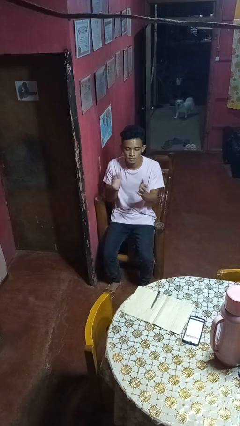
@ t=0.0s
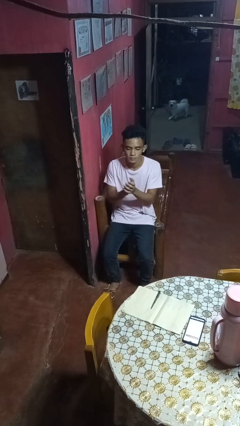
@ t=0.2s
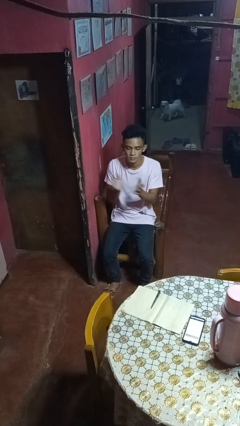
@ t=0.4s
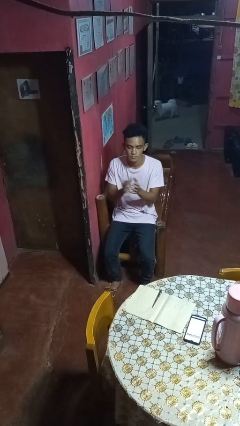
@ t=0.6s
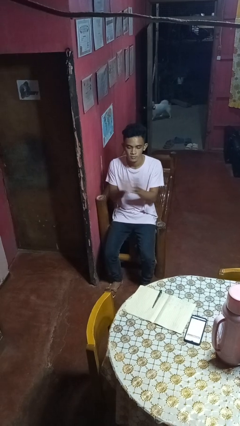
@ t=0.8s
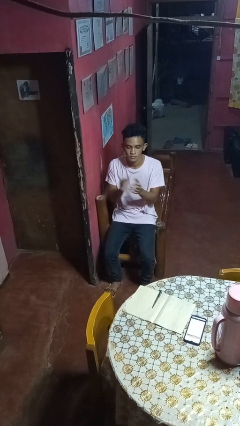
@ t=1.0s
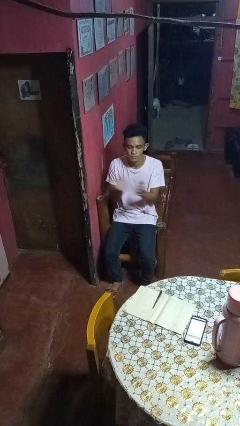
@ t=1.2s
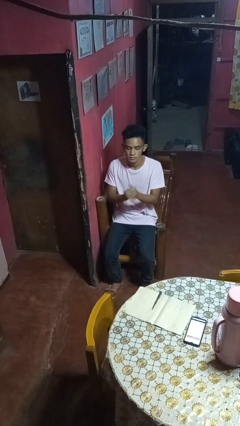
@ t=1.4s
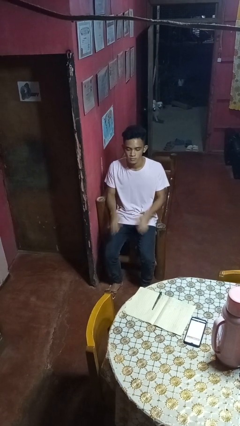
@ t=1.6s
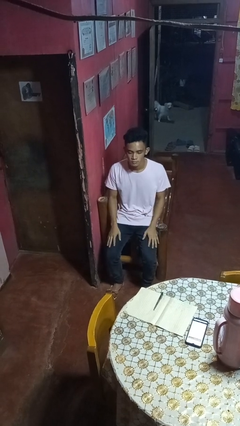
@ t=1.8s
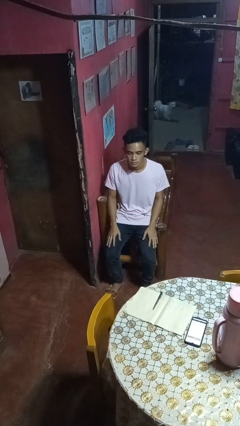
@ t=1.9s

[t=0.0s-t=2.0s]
person claps hands

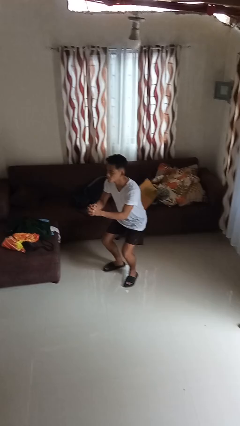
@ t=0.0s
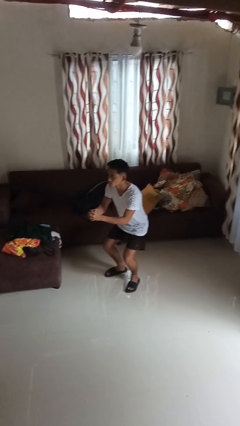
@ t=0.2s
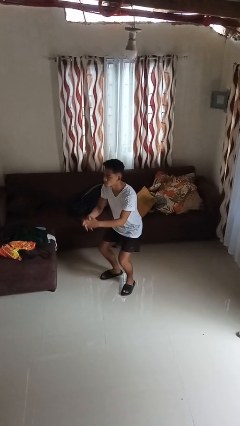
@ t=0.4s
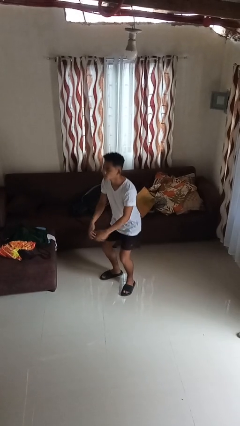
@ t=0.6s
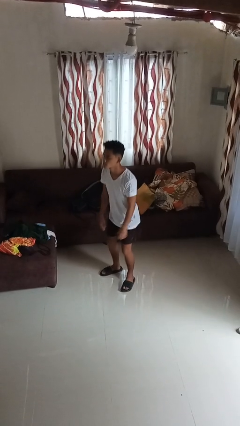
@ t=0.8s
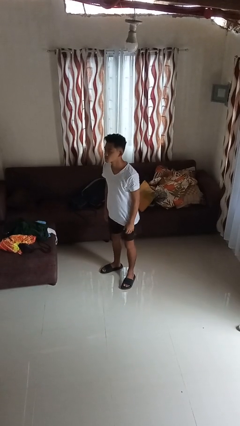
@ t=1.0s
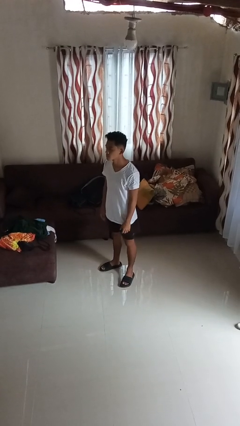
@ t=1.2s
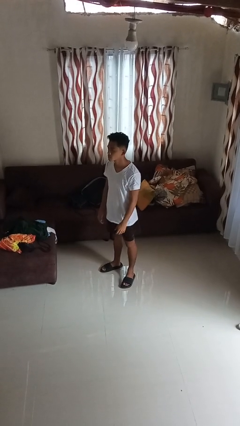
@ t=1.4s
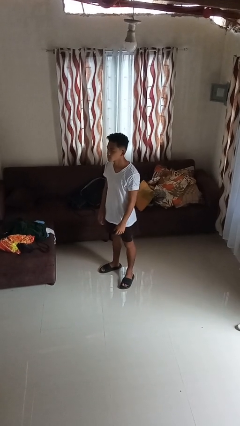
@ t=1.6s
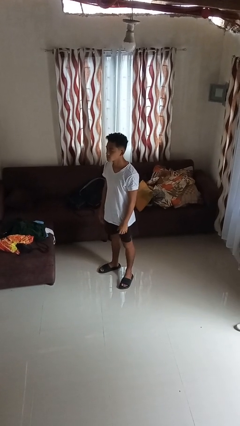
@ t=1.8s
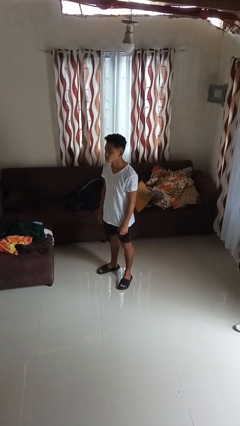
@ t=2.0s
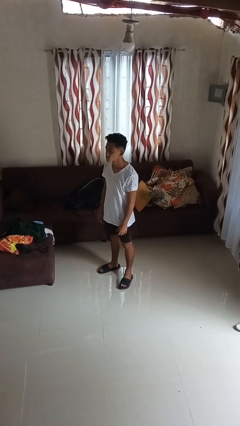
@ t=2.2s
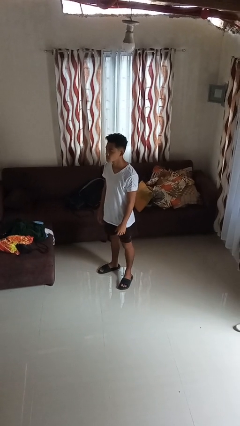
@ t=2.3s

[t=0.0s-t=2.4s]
person stands up

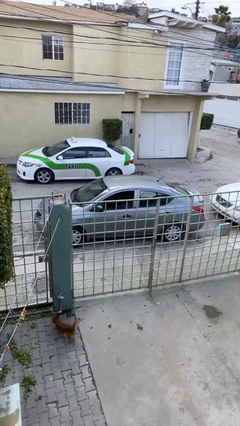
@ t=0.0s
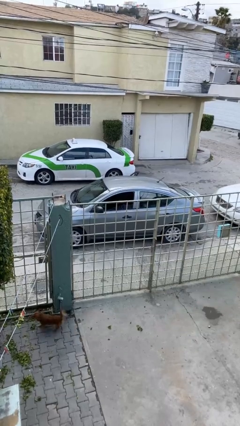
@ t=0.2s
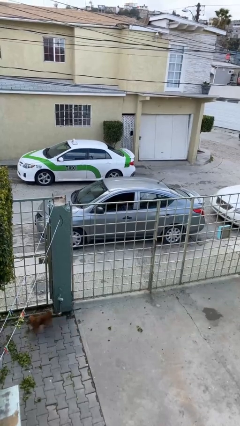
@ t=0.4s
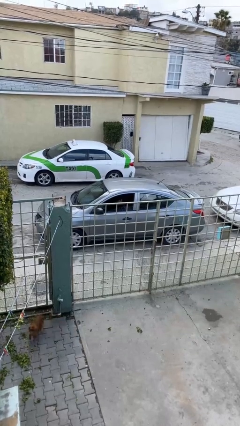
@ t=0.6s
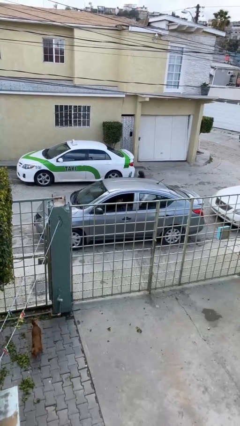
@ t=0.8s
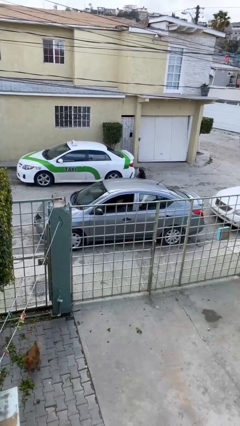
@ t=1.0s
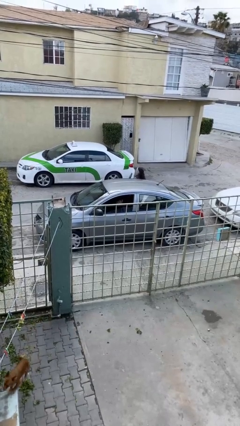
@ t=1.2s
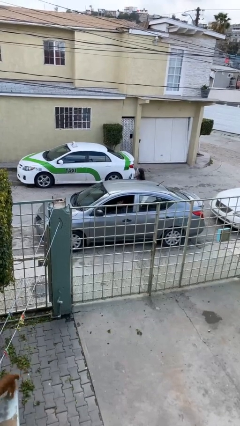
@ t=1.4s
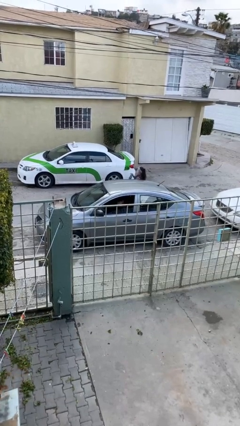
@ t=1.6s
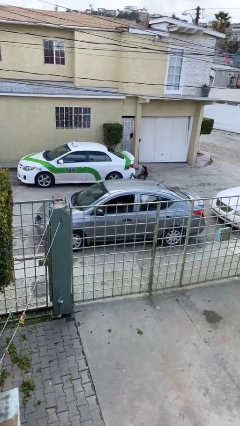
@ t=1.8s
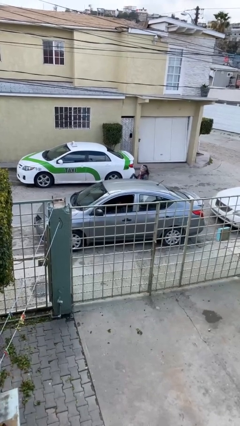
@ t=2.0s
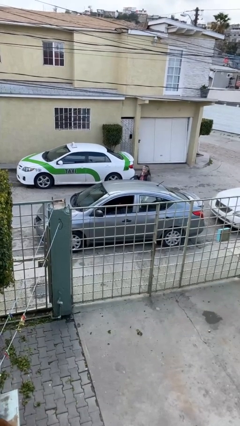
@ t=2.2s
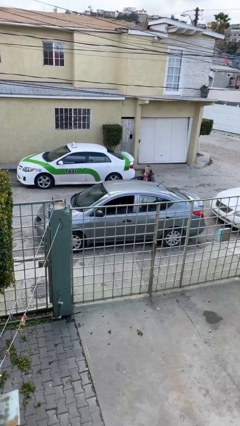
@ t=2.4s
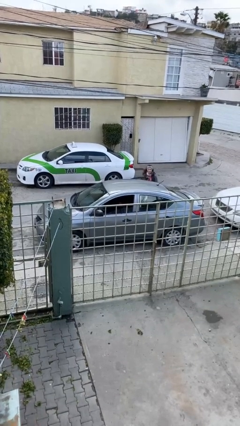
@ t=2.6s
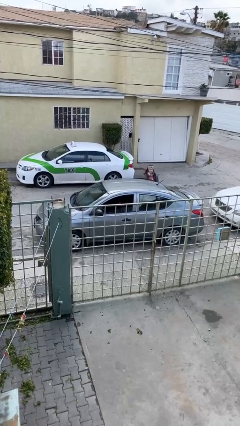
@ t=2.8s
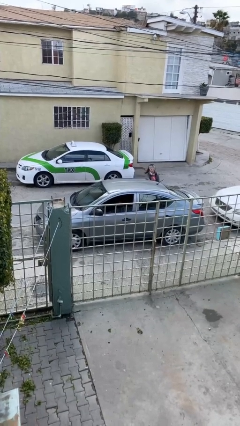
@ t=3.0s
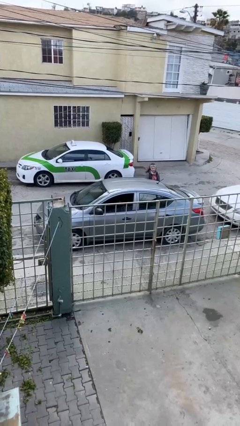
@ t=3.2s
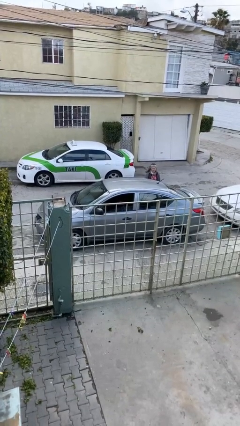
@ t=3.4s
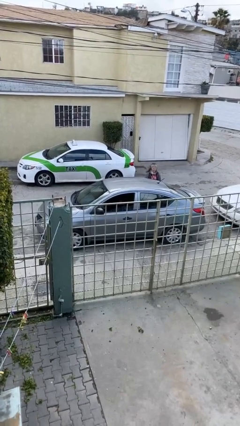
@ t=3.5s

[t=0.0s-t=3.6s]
car drops off person

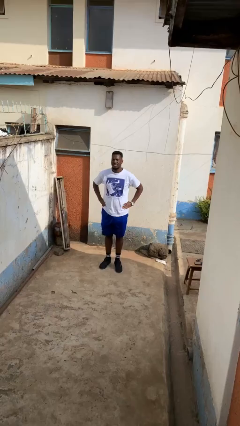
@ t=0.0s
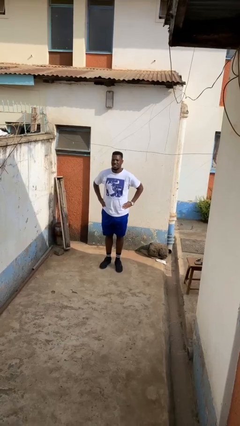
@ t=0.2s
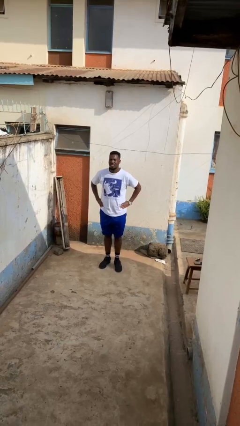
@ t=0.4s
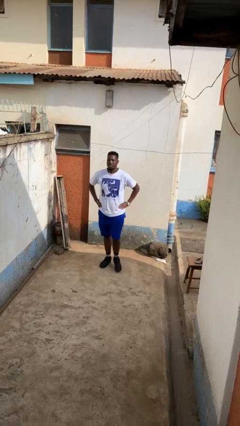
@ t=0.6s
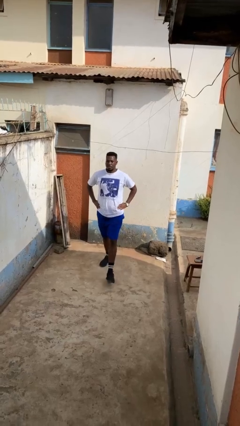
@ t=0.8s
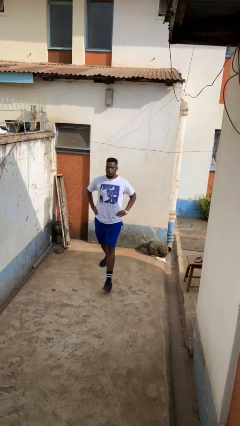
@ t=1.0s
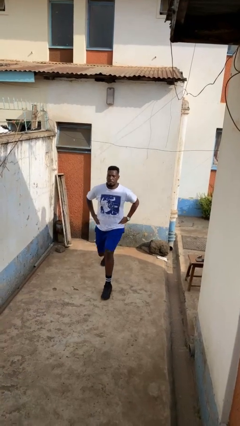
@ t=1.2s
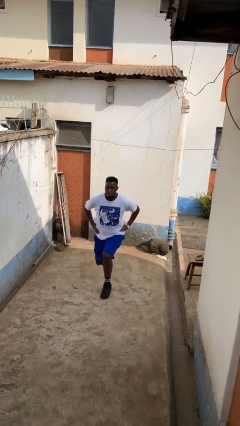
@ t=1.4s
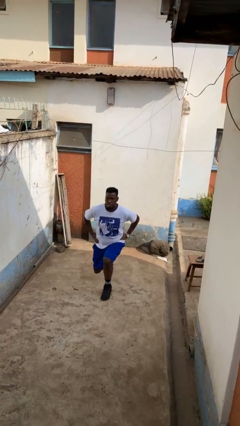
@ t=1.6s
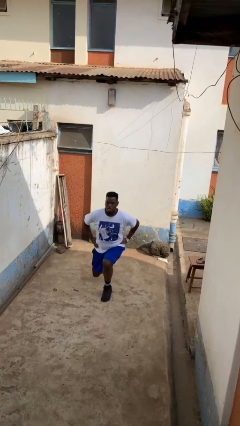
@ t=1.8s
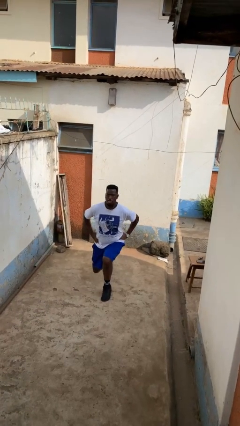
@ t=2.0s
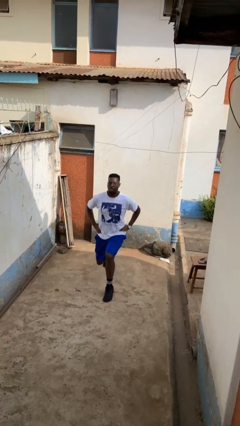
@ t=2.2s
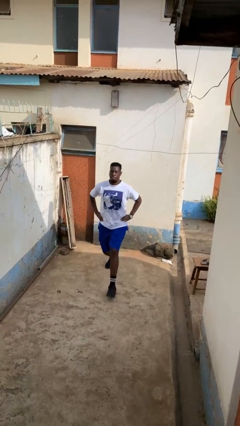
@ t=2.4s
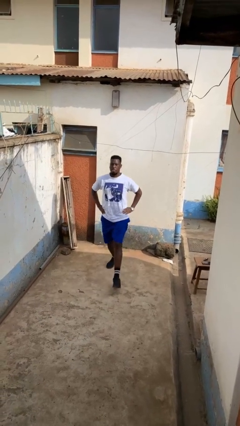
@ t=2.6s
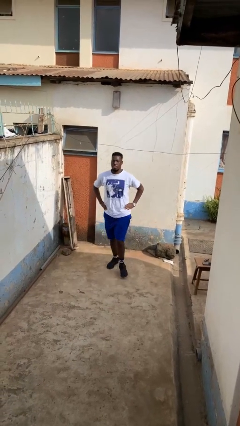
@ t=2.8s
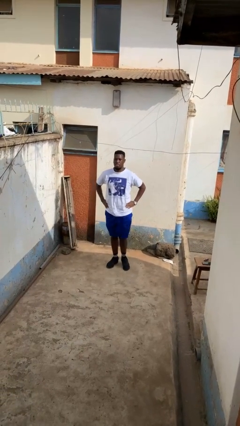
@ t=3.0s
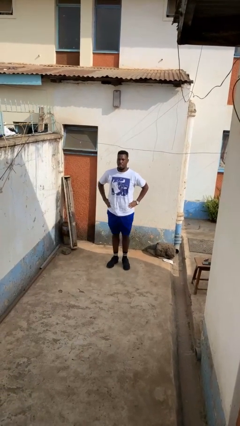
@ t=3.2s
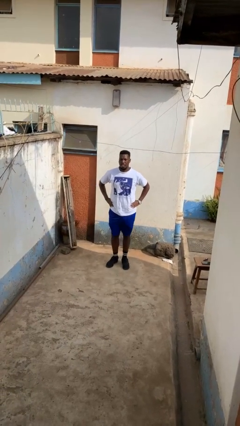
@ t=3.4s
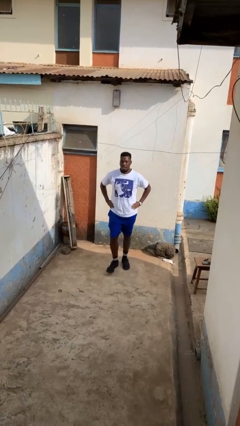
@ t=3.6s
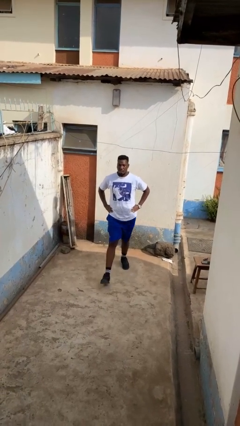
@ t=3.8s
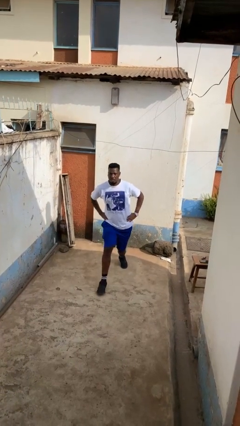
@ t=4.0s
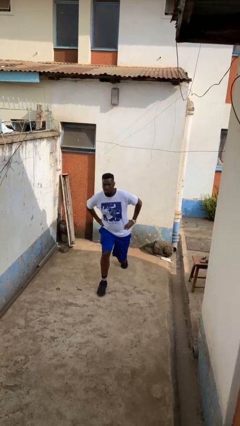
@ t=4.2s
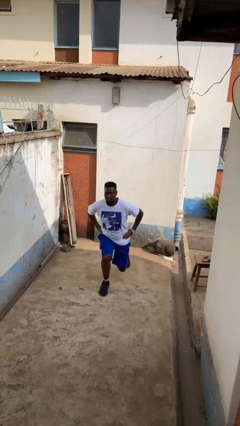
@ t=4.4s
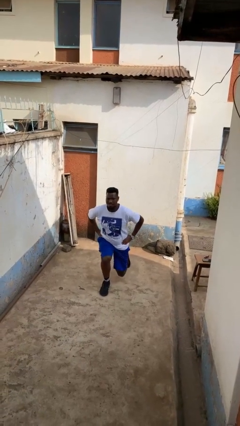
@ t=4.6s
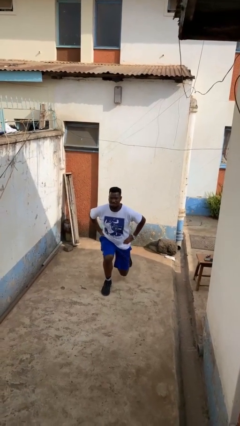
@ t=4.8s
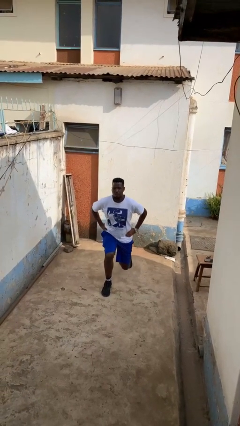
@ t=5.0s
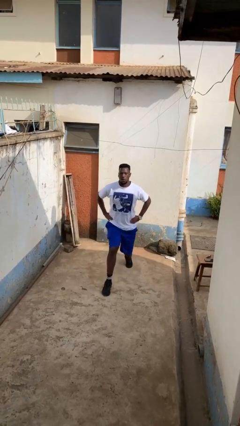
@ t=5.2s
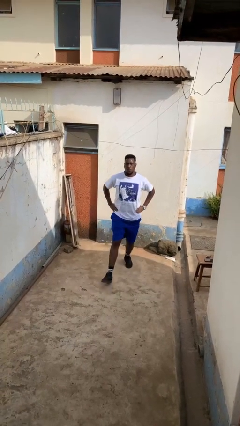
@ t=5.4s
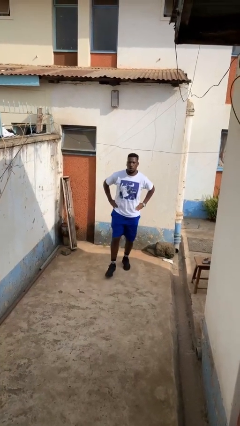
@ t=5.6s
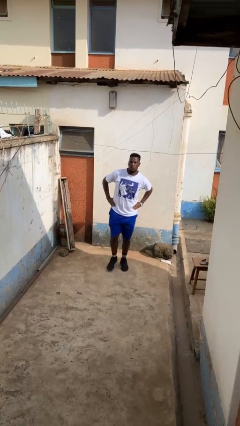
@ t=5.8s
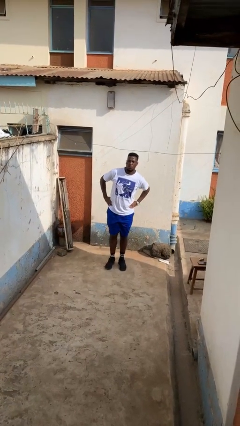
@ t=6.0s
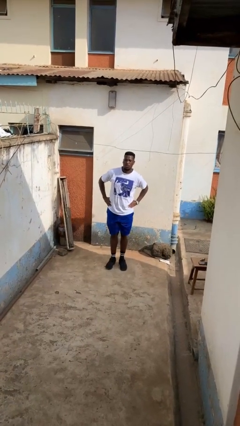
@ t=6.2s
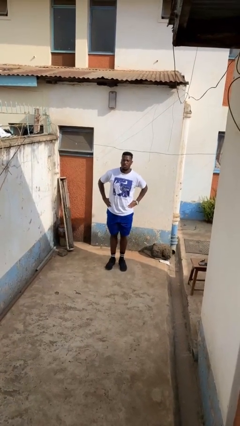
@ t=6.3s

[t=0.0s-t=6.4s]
person exercises with lunges

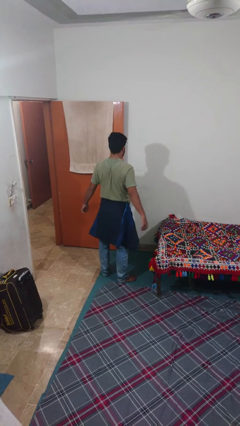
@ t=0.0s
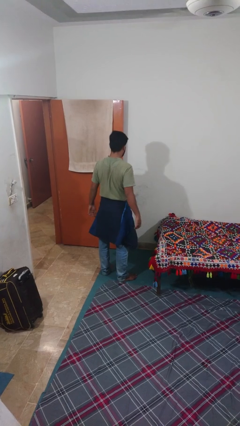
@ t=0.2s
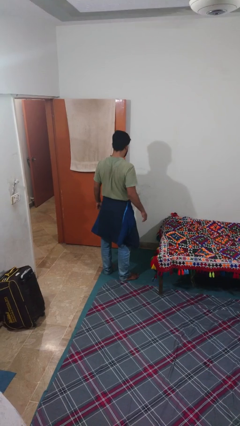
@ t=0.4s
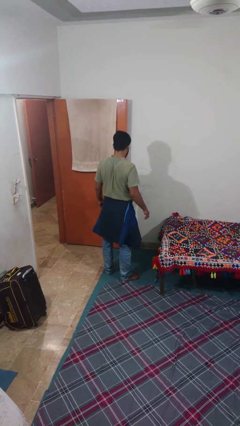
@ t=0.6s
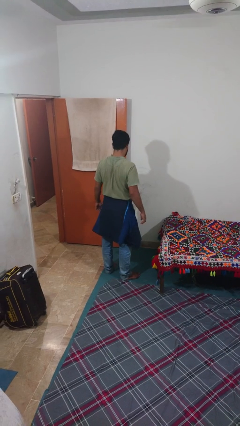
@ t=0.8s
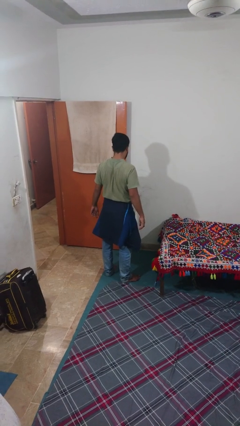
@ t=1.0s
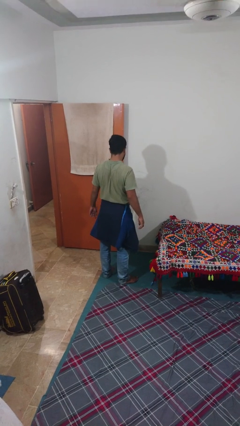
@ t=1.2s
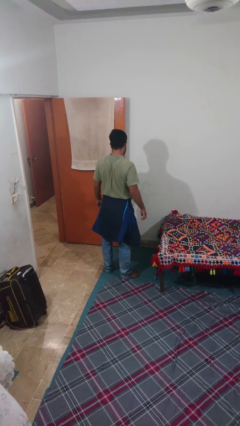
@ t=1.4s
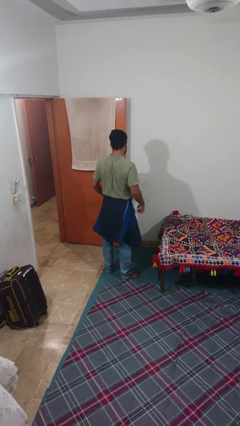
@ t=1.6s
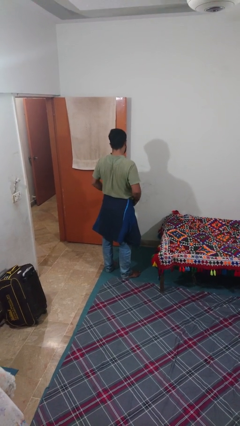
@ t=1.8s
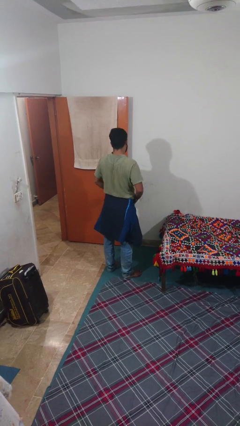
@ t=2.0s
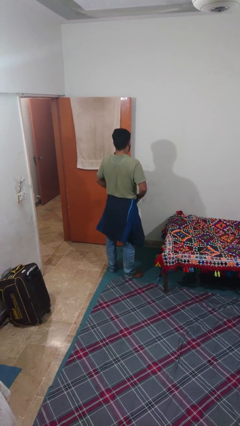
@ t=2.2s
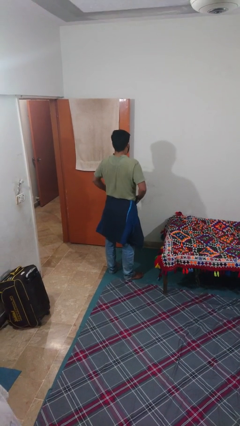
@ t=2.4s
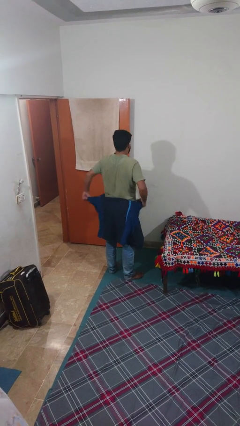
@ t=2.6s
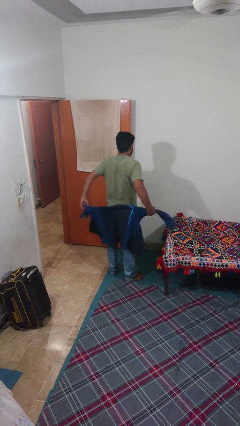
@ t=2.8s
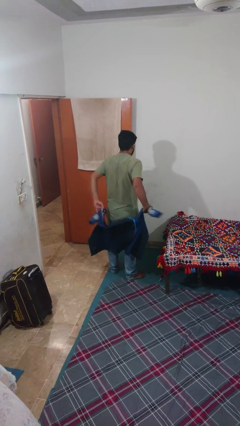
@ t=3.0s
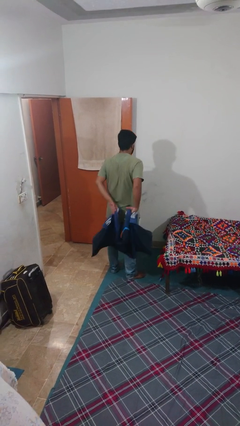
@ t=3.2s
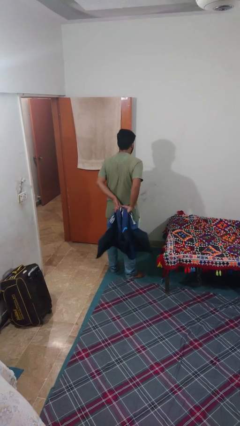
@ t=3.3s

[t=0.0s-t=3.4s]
person unties jacket around waist
